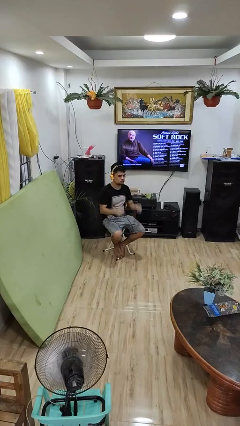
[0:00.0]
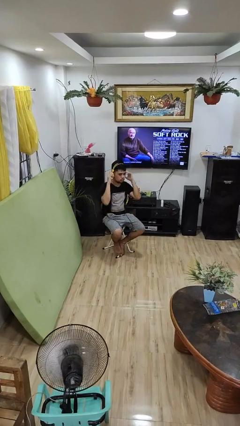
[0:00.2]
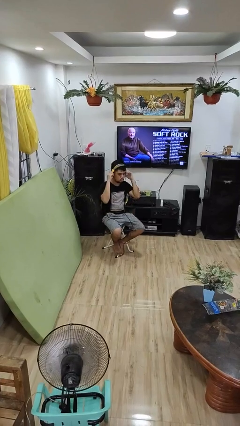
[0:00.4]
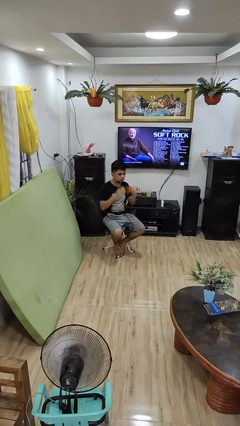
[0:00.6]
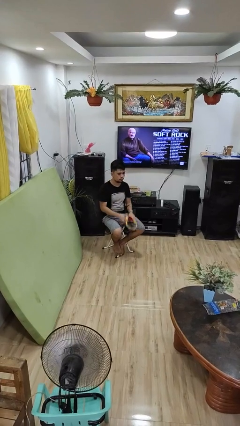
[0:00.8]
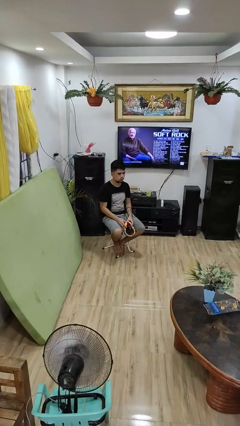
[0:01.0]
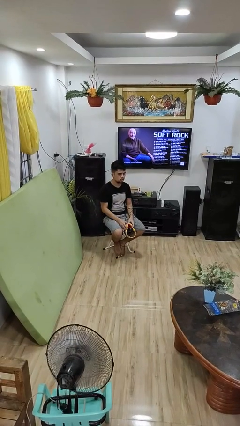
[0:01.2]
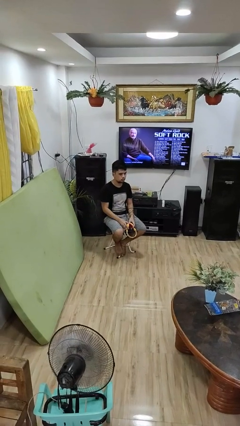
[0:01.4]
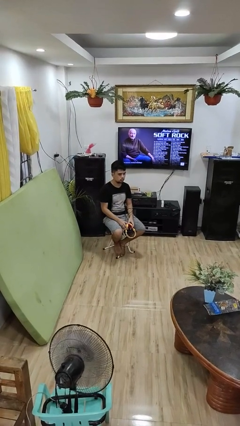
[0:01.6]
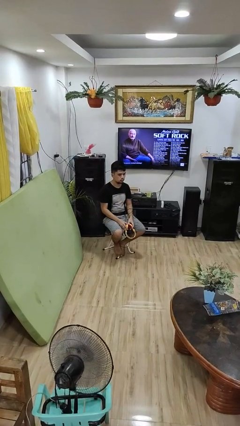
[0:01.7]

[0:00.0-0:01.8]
person takes off headphones

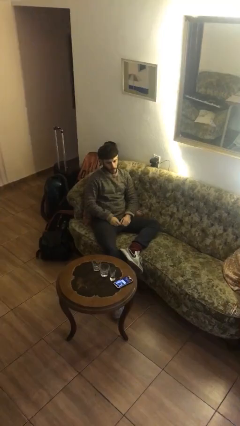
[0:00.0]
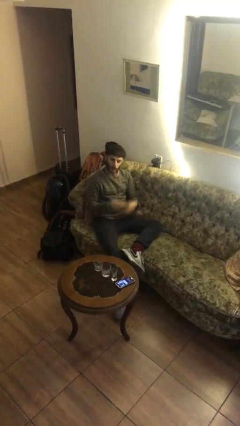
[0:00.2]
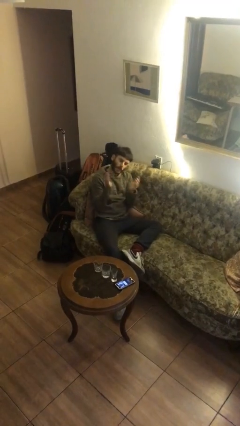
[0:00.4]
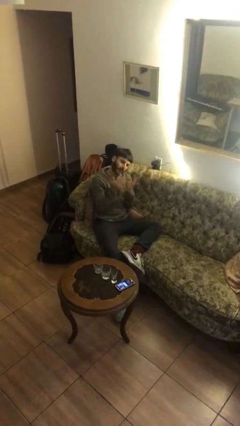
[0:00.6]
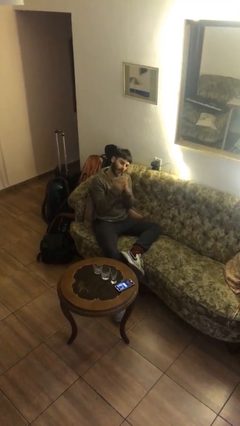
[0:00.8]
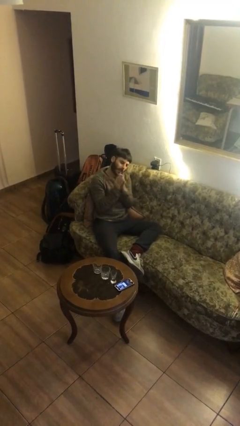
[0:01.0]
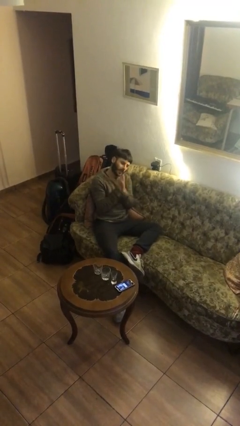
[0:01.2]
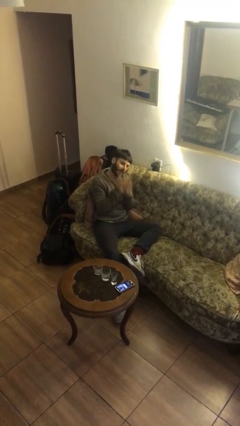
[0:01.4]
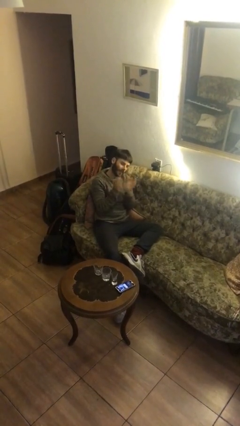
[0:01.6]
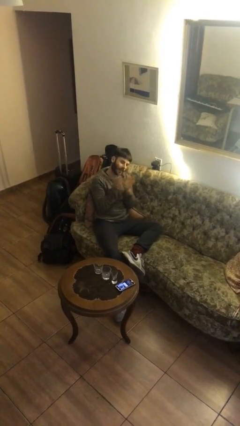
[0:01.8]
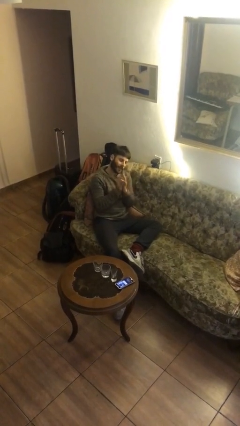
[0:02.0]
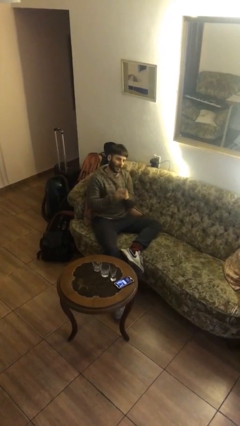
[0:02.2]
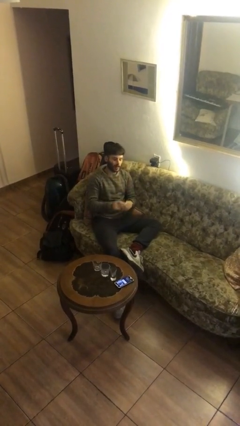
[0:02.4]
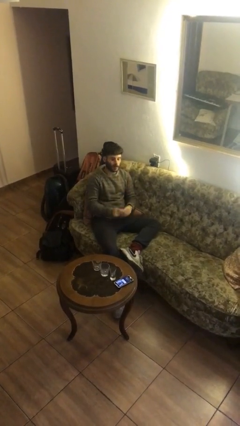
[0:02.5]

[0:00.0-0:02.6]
person claps hands

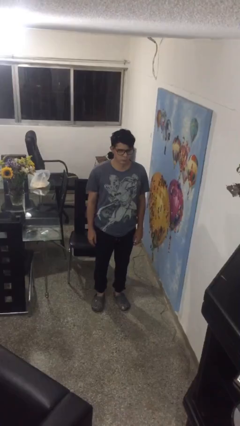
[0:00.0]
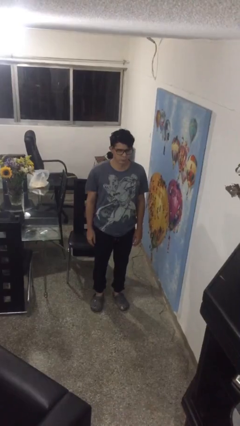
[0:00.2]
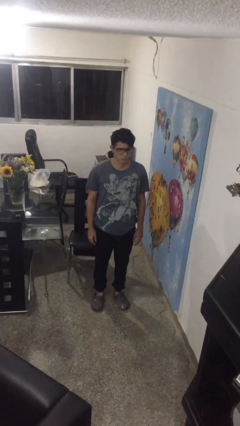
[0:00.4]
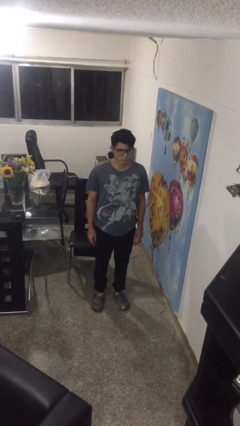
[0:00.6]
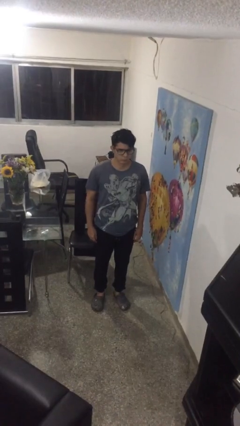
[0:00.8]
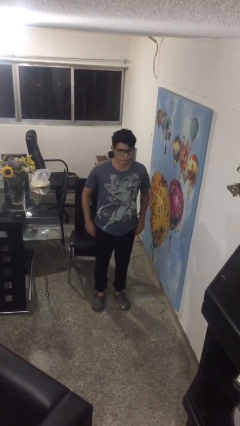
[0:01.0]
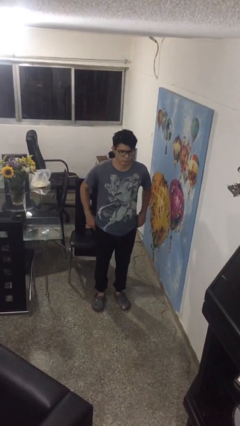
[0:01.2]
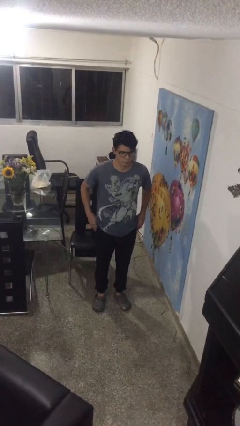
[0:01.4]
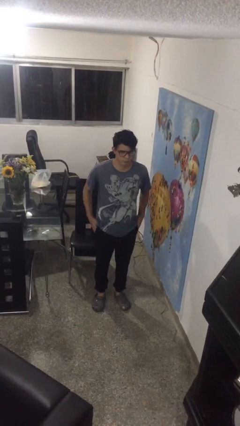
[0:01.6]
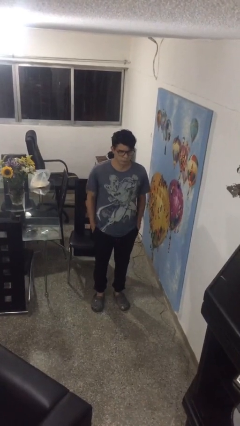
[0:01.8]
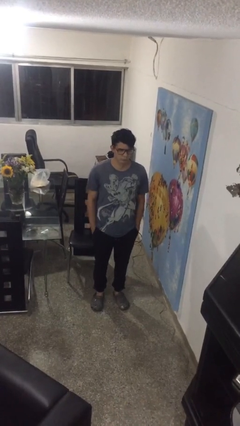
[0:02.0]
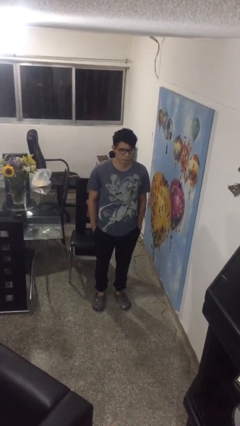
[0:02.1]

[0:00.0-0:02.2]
person puts hands in back pockets

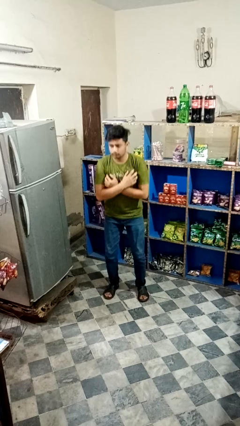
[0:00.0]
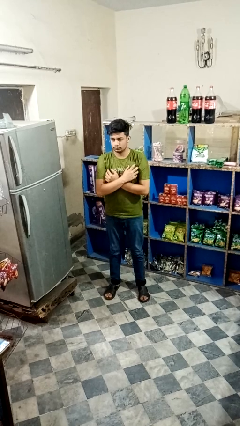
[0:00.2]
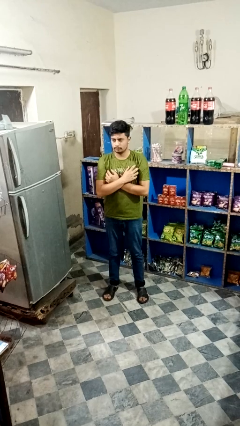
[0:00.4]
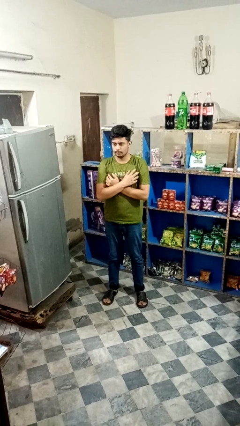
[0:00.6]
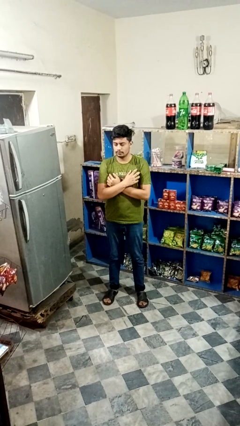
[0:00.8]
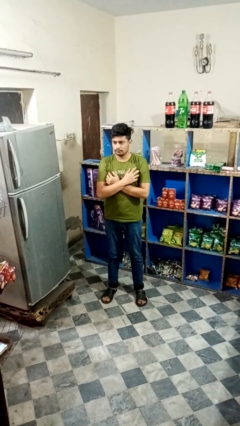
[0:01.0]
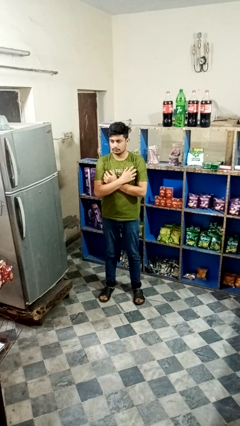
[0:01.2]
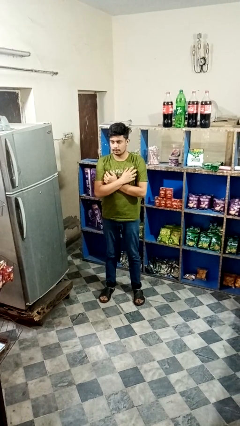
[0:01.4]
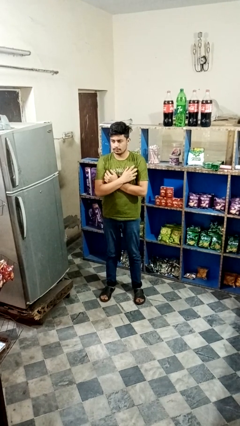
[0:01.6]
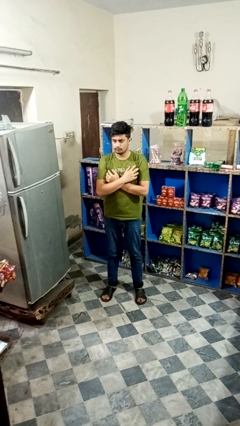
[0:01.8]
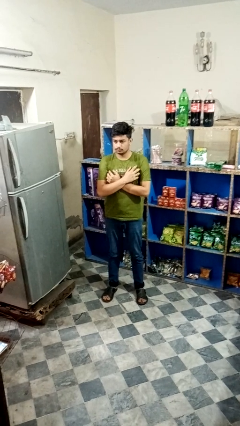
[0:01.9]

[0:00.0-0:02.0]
person stands up

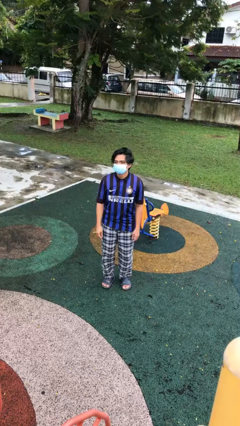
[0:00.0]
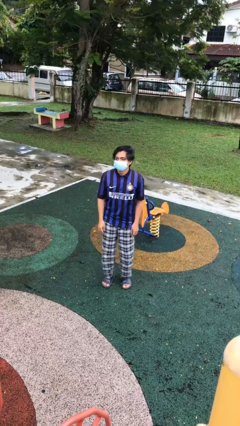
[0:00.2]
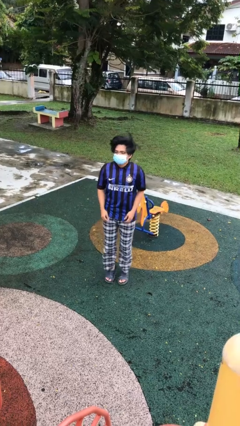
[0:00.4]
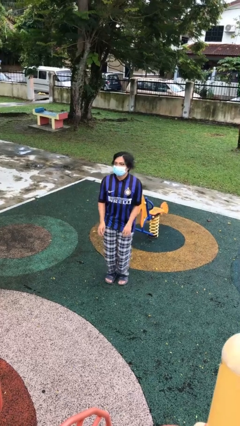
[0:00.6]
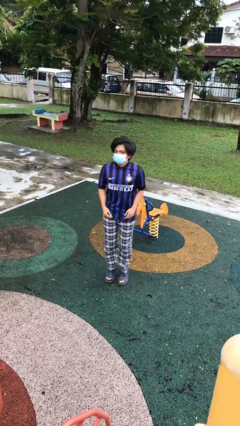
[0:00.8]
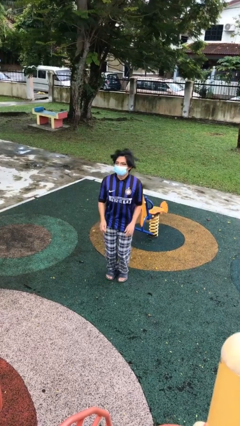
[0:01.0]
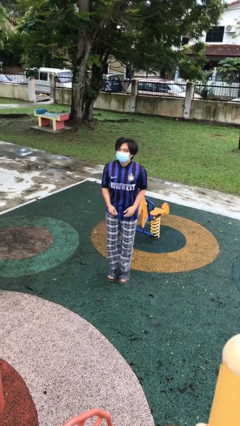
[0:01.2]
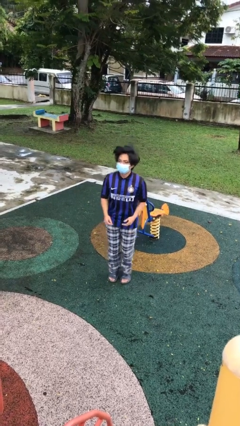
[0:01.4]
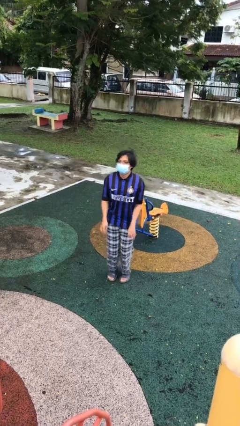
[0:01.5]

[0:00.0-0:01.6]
person jumps

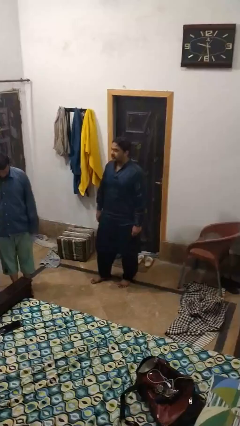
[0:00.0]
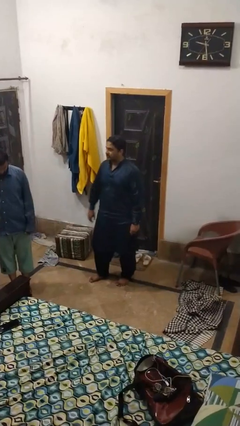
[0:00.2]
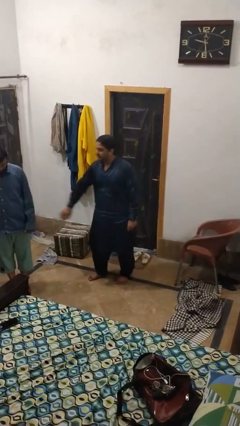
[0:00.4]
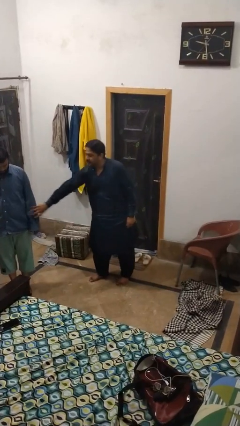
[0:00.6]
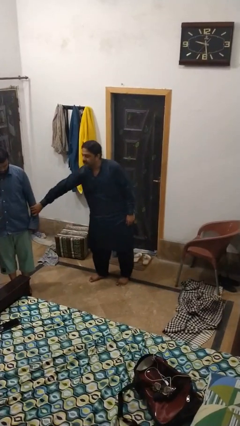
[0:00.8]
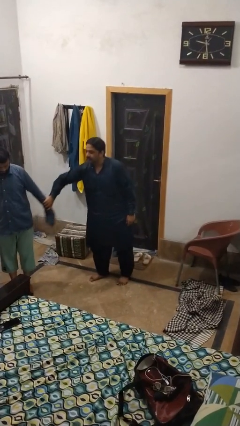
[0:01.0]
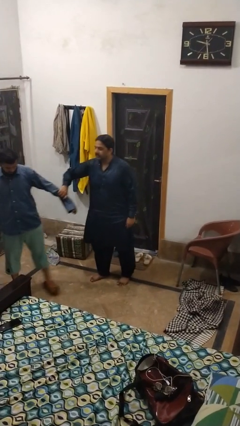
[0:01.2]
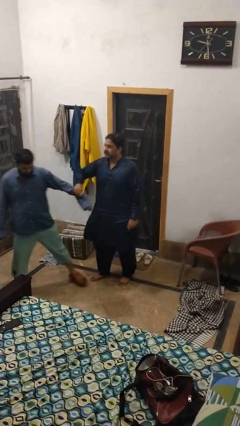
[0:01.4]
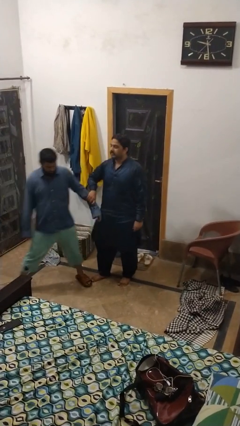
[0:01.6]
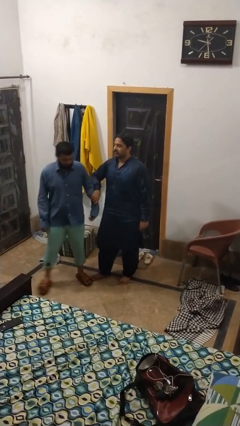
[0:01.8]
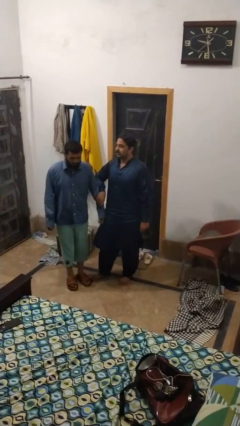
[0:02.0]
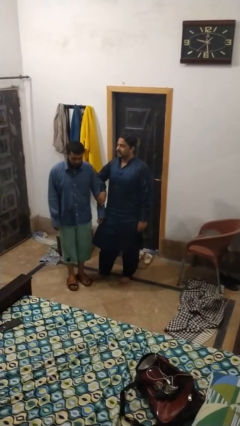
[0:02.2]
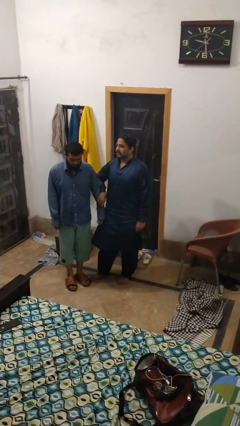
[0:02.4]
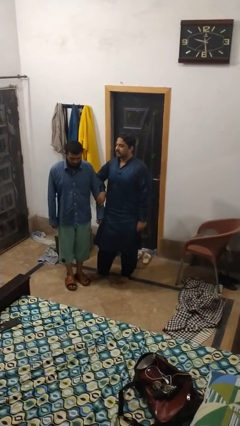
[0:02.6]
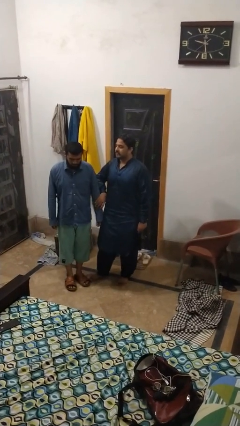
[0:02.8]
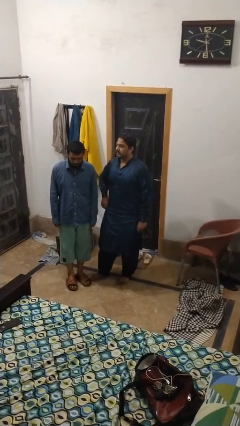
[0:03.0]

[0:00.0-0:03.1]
person grabs person by forearm

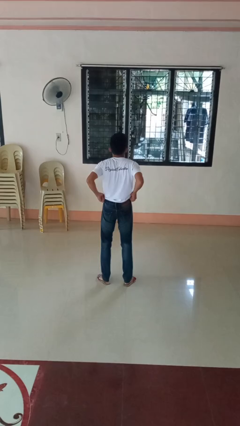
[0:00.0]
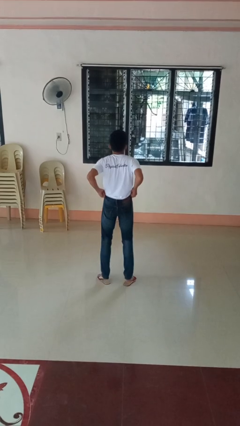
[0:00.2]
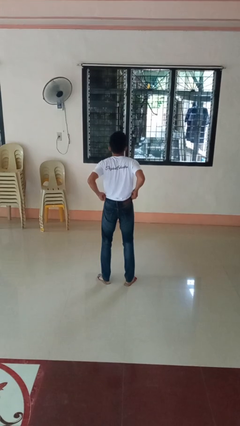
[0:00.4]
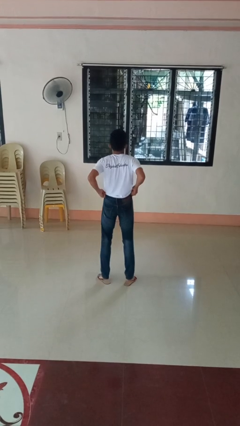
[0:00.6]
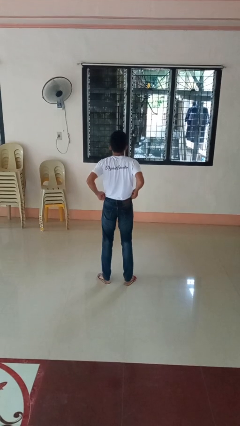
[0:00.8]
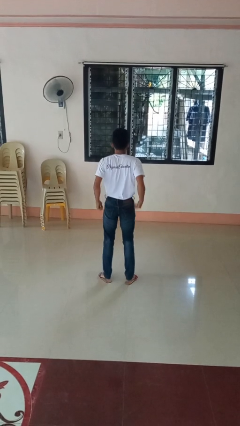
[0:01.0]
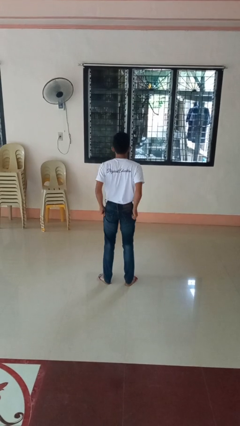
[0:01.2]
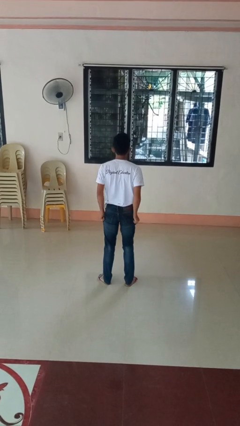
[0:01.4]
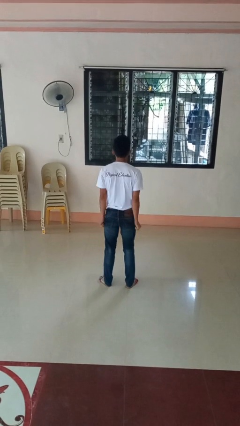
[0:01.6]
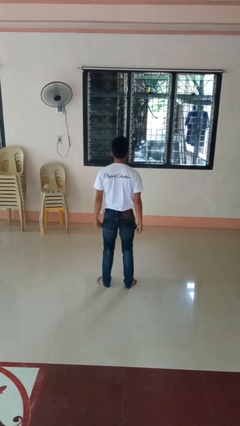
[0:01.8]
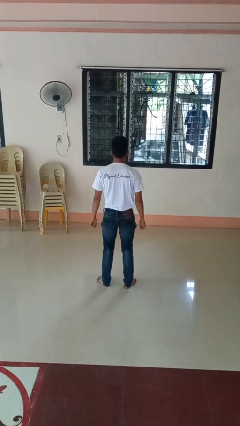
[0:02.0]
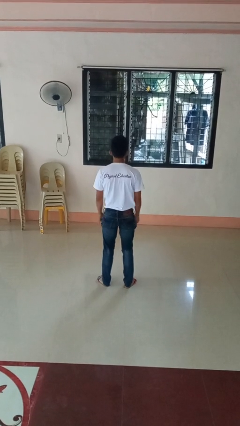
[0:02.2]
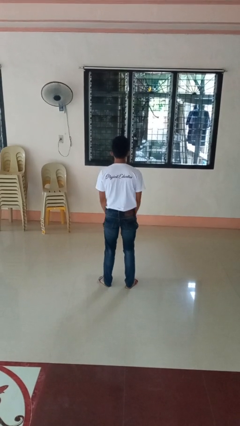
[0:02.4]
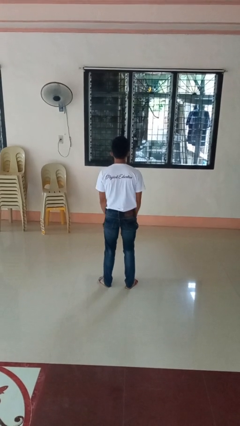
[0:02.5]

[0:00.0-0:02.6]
person hikes up pants

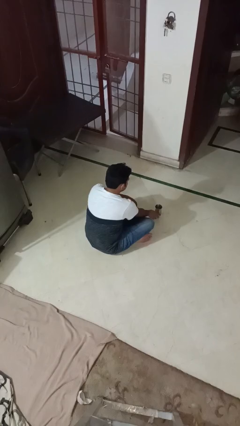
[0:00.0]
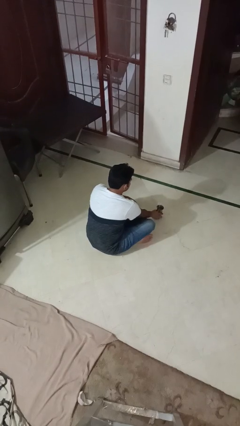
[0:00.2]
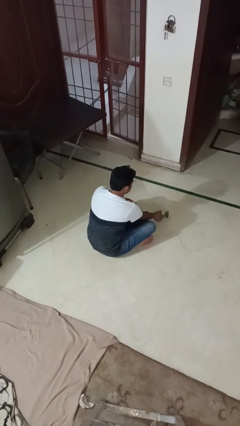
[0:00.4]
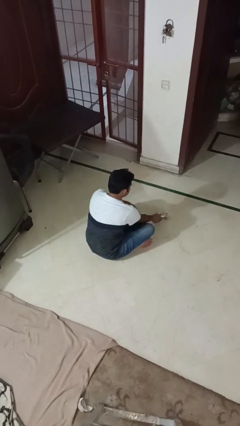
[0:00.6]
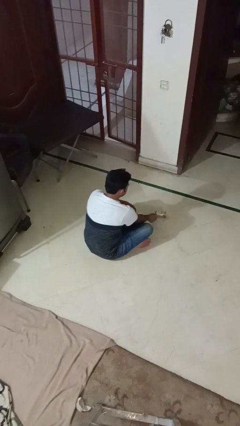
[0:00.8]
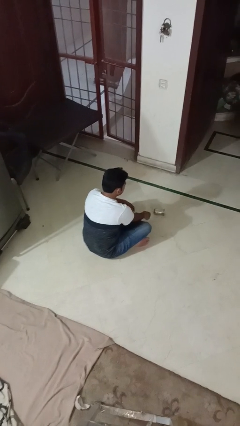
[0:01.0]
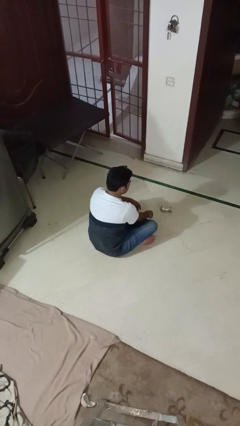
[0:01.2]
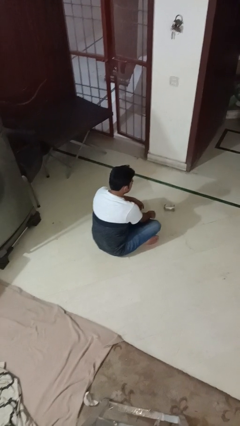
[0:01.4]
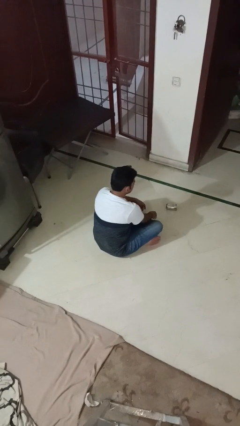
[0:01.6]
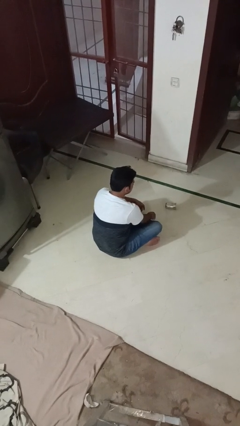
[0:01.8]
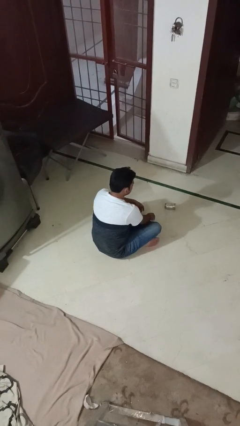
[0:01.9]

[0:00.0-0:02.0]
person spills on floor
